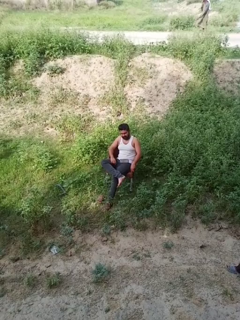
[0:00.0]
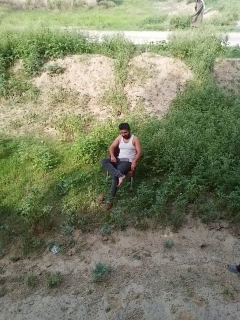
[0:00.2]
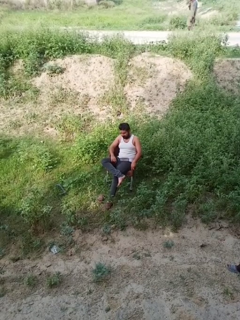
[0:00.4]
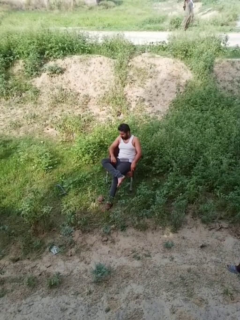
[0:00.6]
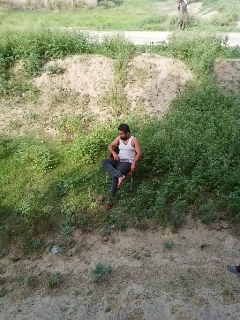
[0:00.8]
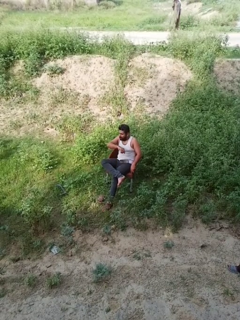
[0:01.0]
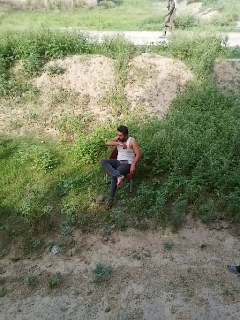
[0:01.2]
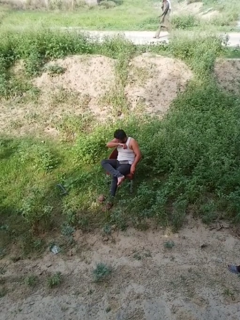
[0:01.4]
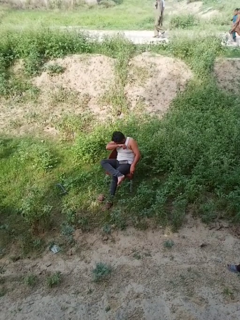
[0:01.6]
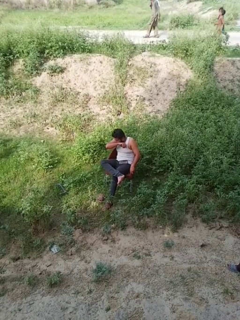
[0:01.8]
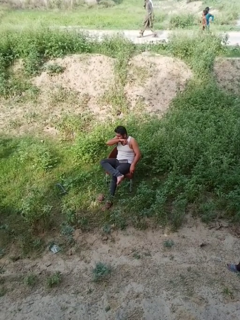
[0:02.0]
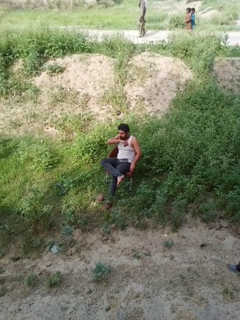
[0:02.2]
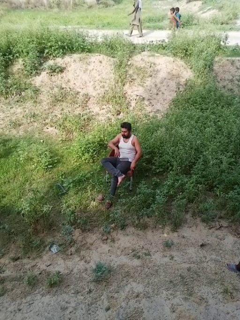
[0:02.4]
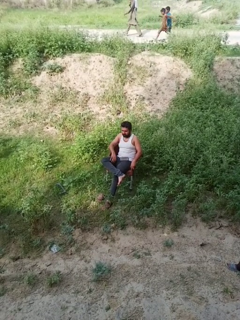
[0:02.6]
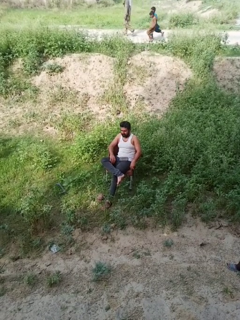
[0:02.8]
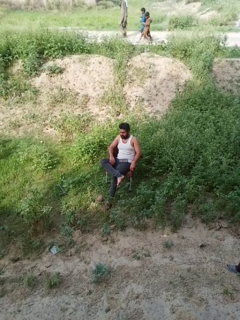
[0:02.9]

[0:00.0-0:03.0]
person sneezes into arm

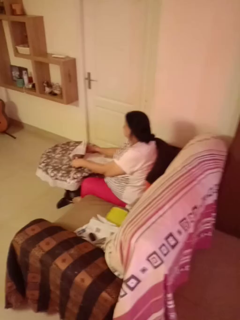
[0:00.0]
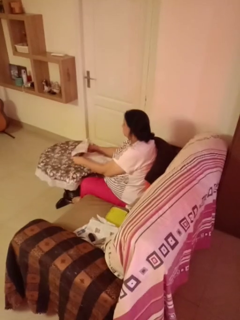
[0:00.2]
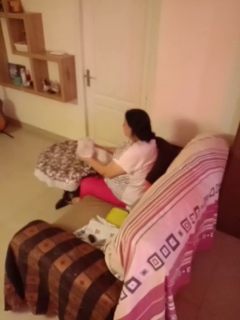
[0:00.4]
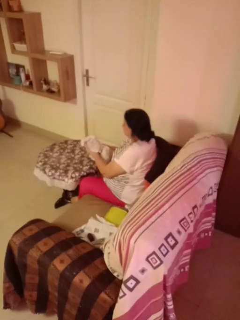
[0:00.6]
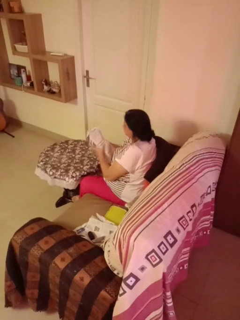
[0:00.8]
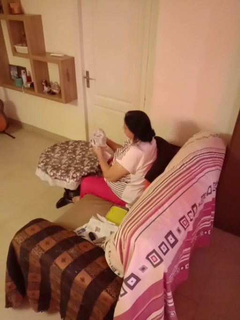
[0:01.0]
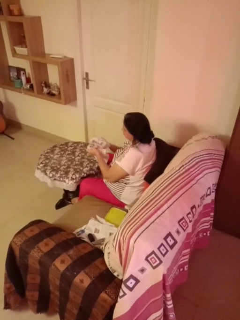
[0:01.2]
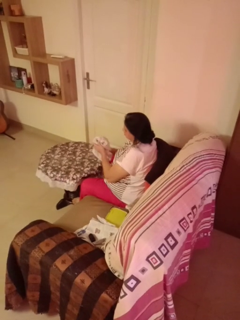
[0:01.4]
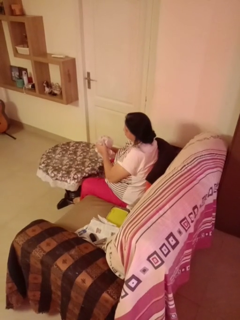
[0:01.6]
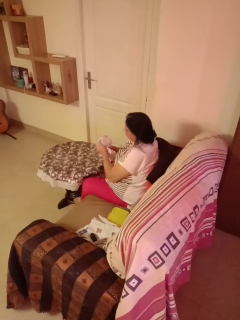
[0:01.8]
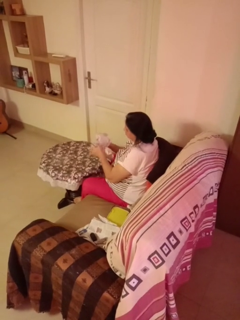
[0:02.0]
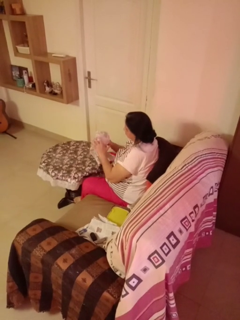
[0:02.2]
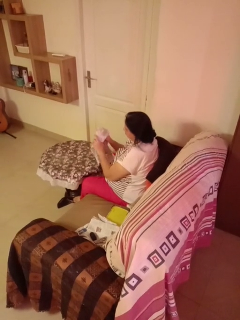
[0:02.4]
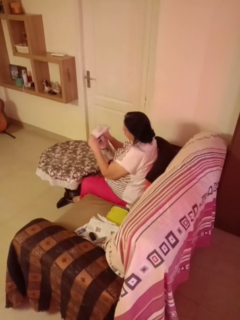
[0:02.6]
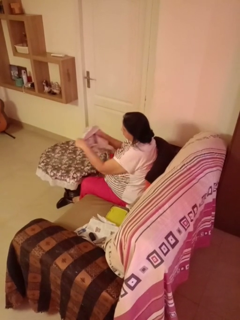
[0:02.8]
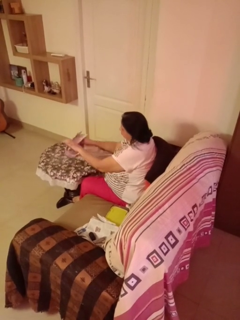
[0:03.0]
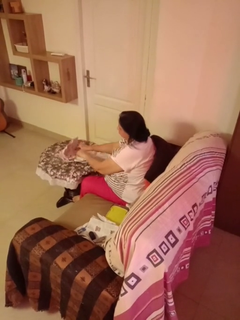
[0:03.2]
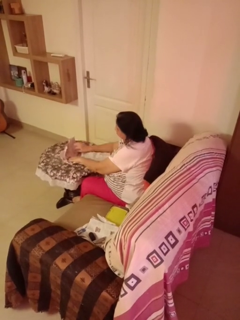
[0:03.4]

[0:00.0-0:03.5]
person crumples paper

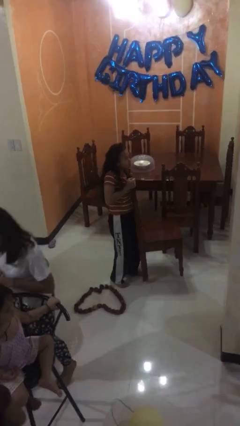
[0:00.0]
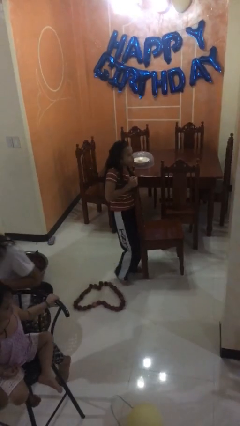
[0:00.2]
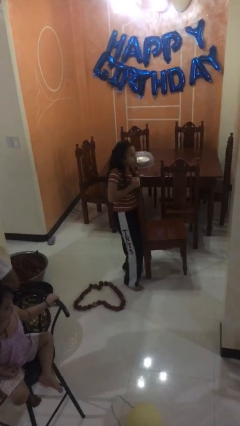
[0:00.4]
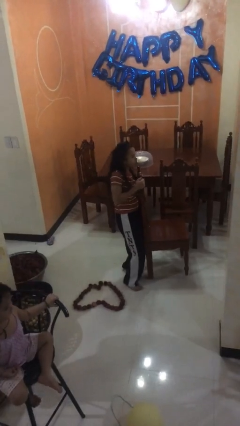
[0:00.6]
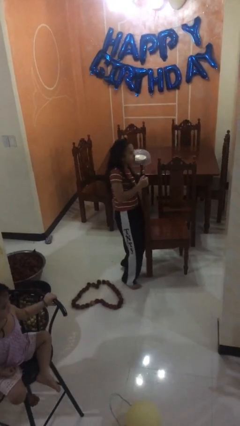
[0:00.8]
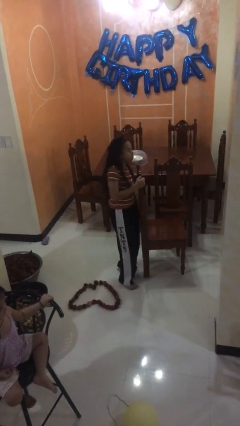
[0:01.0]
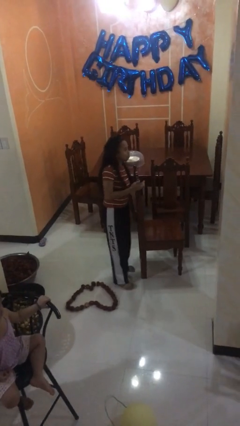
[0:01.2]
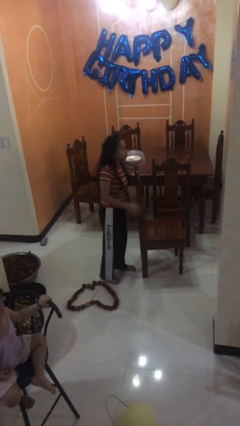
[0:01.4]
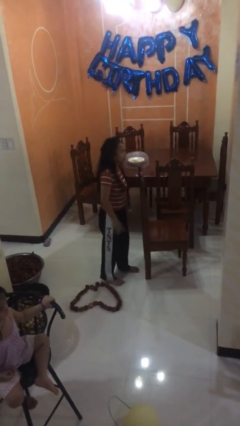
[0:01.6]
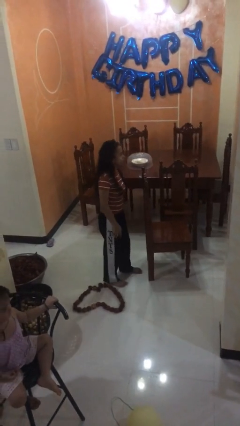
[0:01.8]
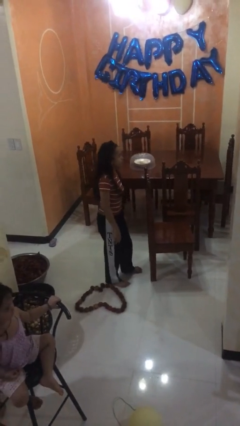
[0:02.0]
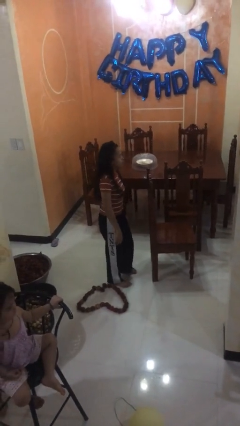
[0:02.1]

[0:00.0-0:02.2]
person puts down object on floor

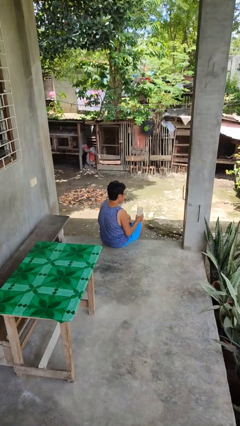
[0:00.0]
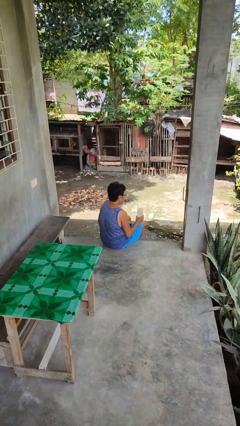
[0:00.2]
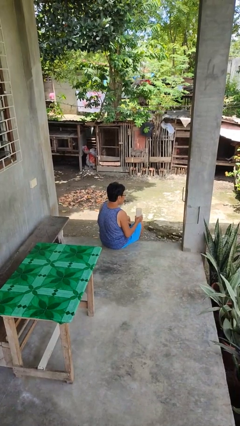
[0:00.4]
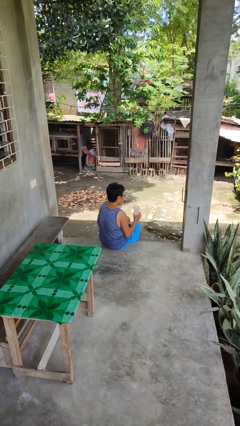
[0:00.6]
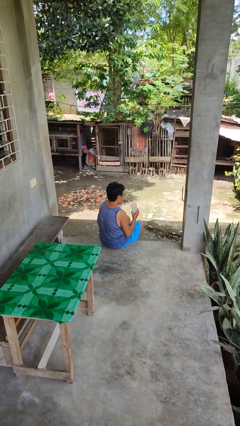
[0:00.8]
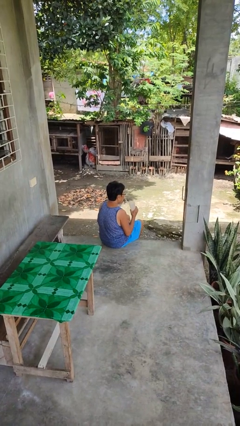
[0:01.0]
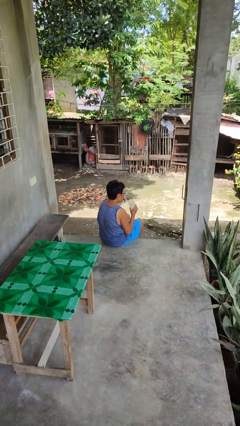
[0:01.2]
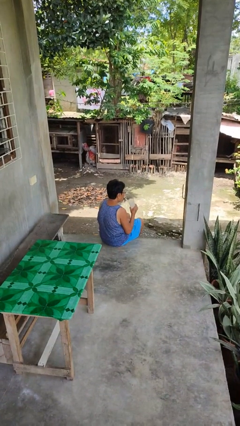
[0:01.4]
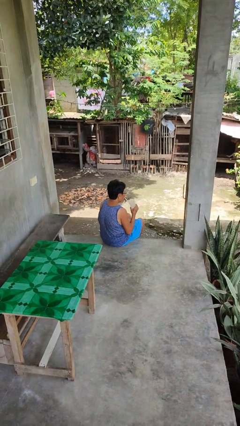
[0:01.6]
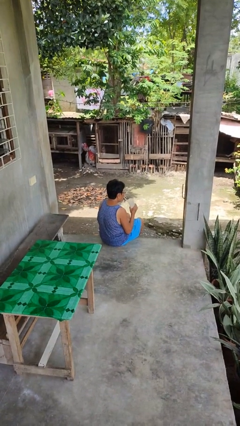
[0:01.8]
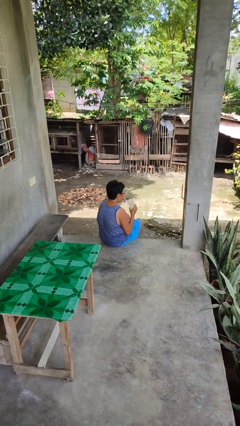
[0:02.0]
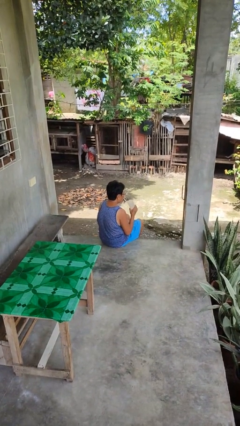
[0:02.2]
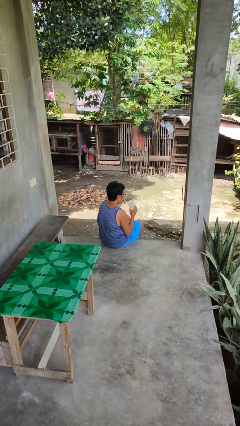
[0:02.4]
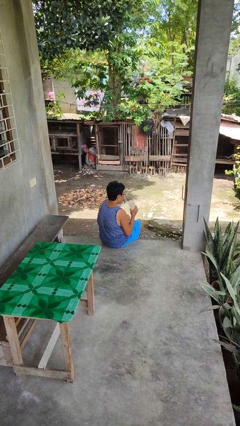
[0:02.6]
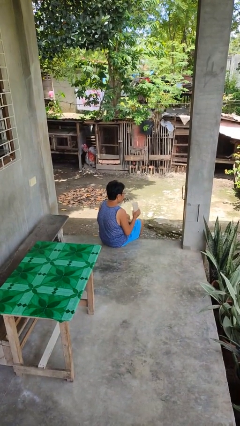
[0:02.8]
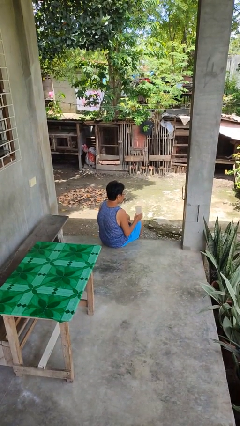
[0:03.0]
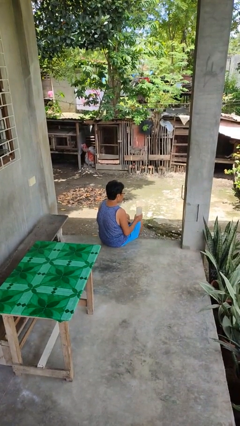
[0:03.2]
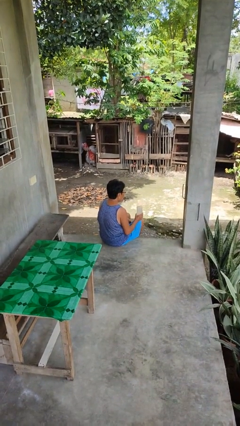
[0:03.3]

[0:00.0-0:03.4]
person drinks from straw

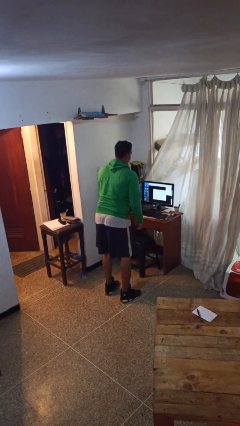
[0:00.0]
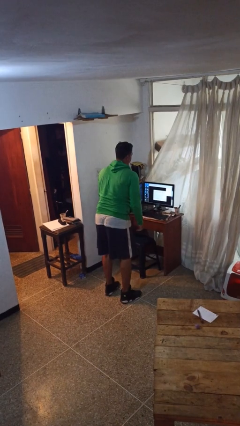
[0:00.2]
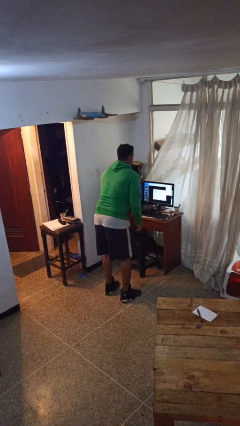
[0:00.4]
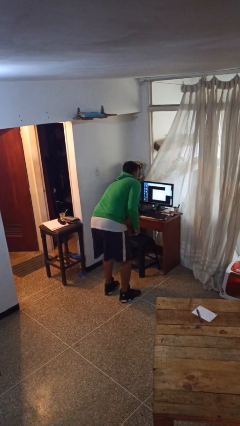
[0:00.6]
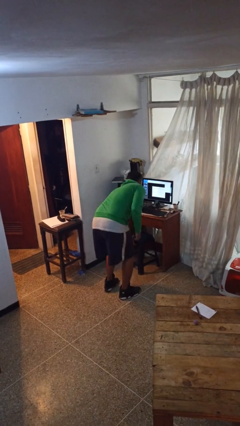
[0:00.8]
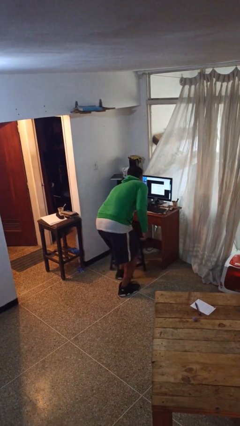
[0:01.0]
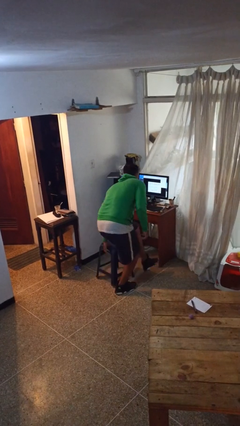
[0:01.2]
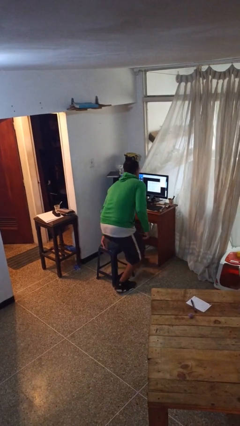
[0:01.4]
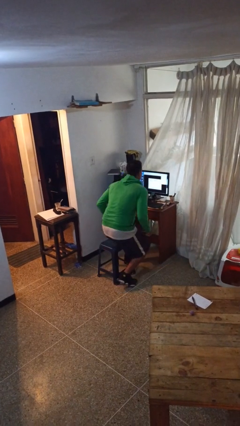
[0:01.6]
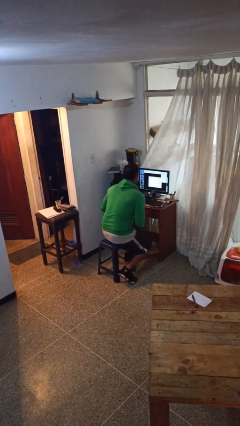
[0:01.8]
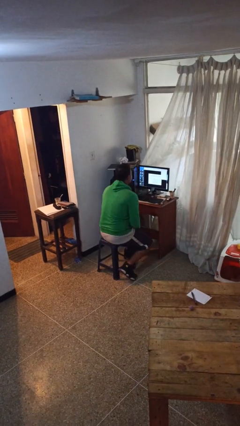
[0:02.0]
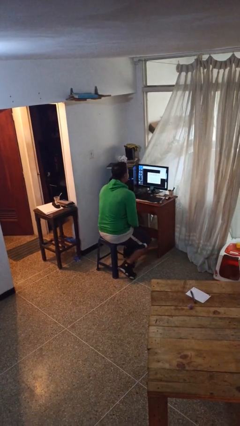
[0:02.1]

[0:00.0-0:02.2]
person sits down

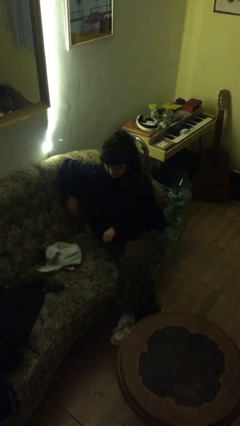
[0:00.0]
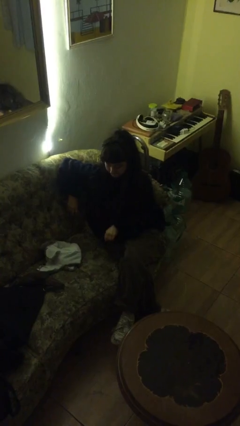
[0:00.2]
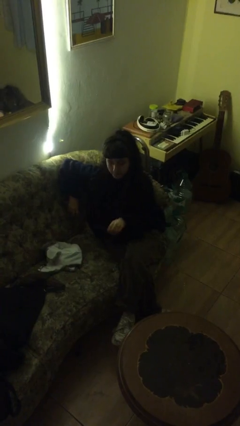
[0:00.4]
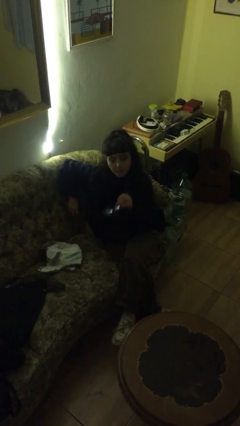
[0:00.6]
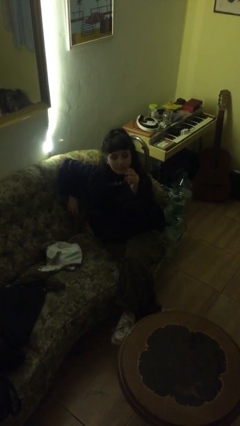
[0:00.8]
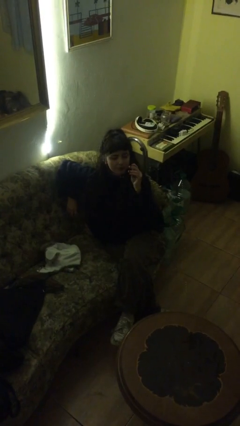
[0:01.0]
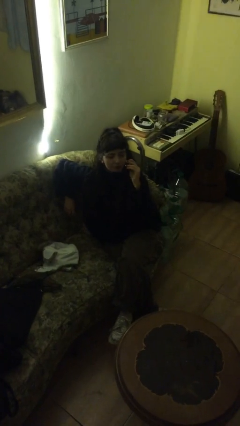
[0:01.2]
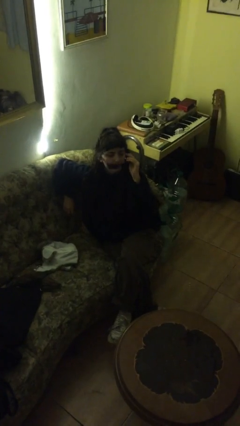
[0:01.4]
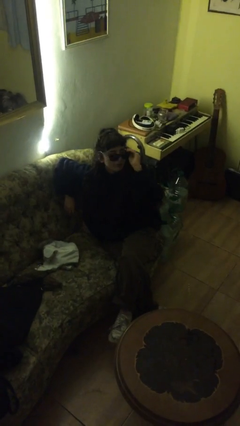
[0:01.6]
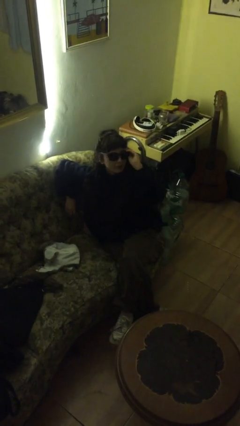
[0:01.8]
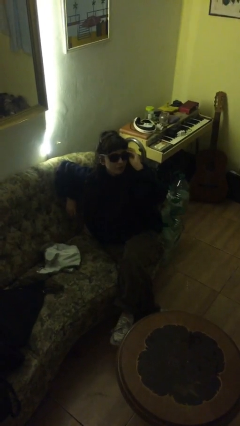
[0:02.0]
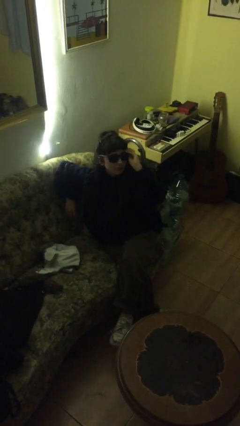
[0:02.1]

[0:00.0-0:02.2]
person puts on sunglasses

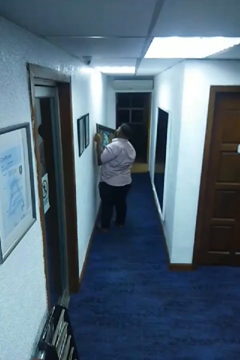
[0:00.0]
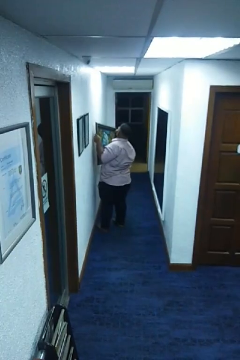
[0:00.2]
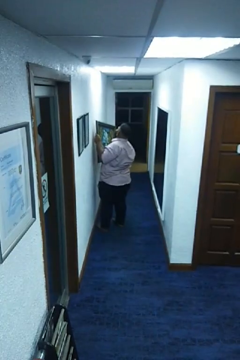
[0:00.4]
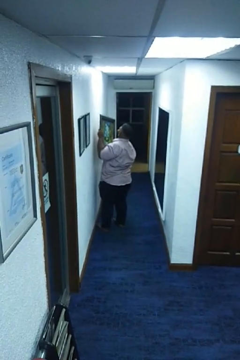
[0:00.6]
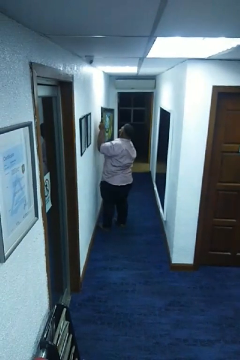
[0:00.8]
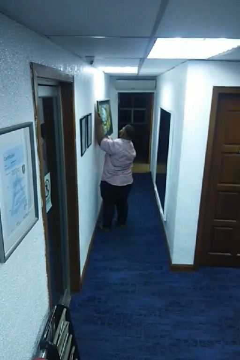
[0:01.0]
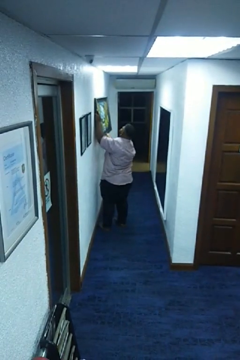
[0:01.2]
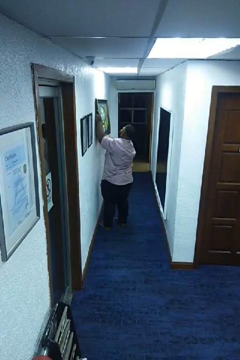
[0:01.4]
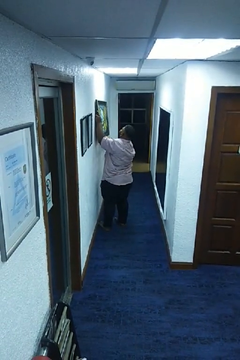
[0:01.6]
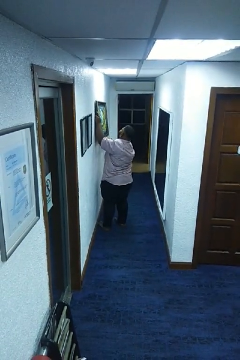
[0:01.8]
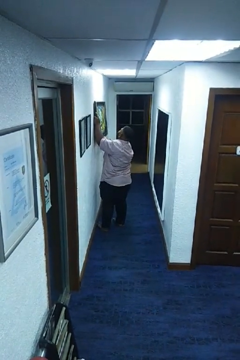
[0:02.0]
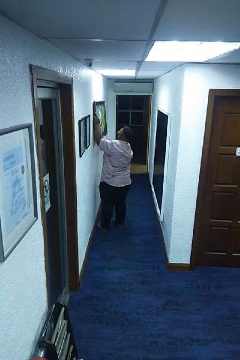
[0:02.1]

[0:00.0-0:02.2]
person puts up picture frame

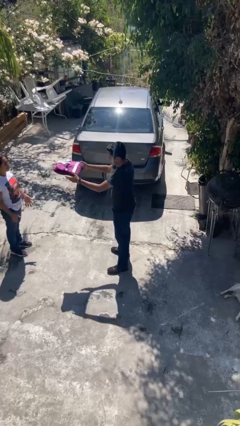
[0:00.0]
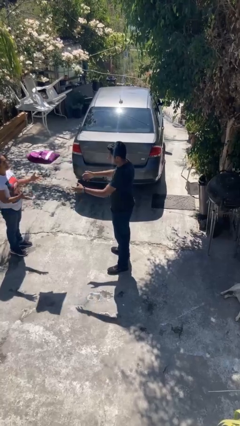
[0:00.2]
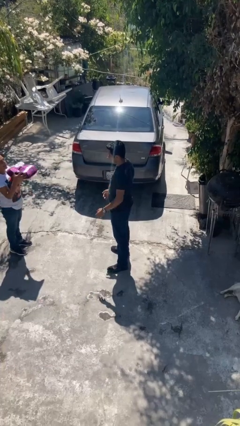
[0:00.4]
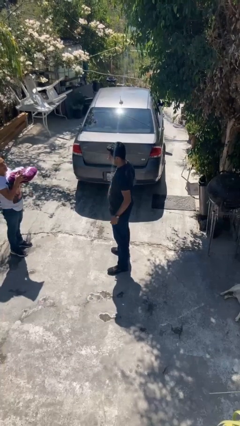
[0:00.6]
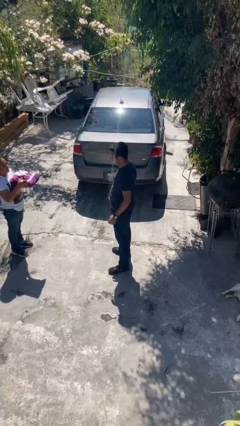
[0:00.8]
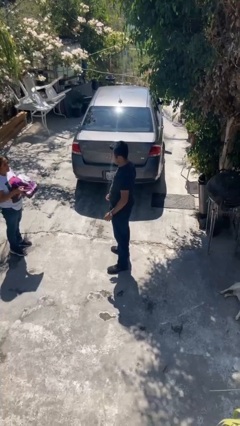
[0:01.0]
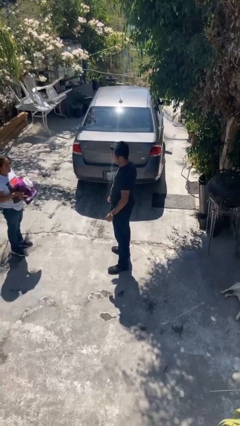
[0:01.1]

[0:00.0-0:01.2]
person throws object to person
